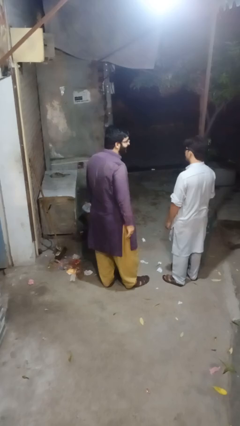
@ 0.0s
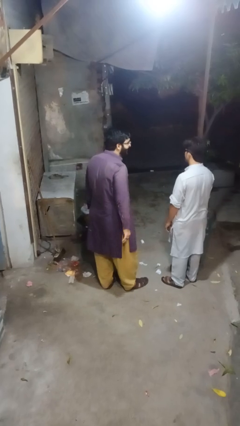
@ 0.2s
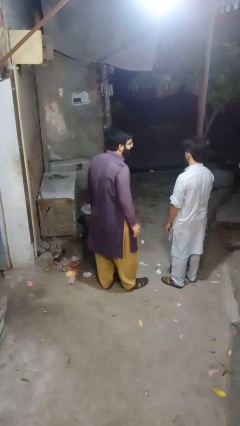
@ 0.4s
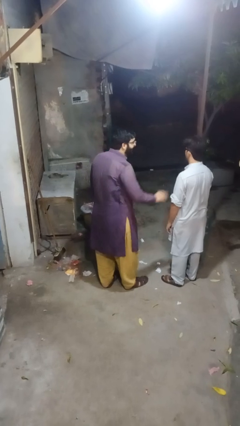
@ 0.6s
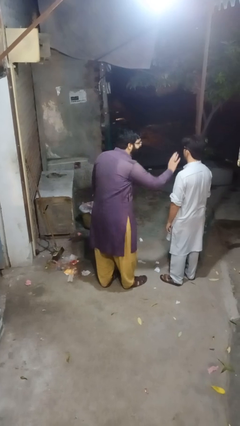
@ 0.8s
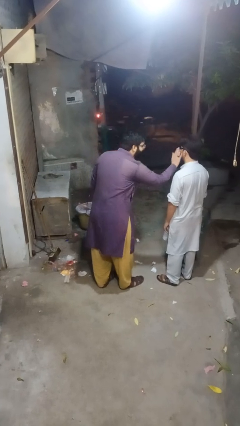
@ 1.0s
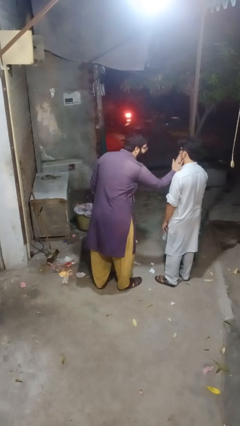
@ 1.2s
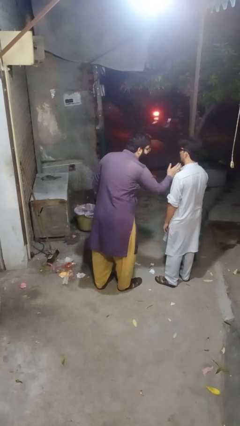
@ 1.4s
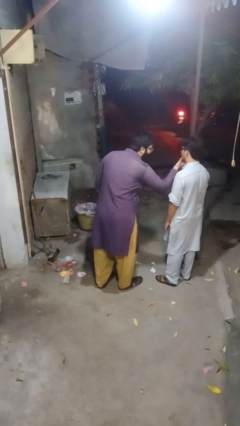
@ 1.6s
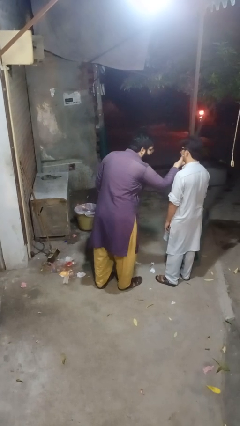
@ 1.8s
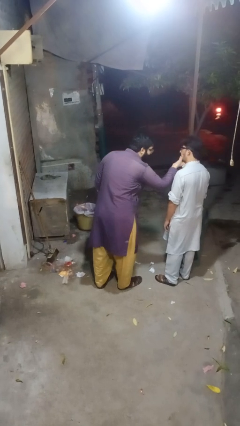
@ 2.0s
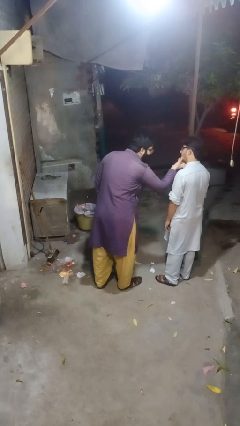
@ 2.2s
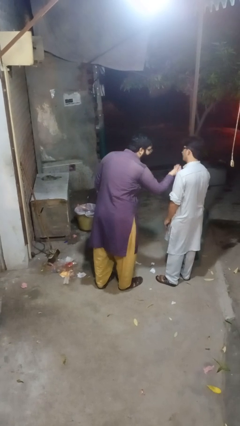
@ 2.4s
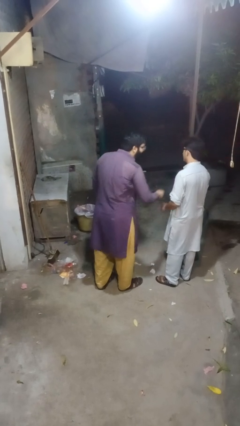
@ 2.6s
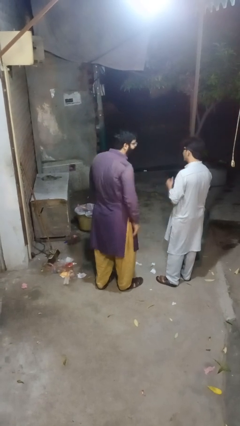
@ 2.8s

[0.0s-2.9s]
person touches face of person

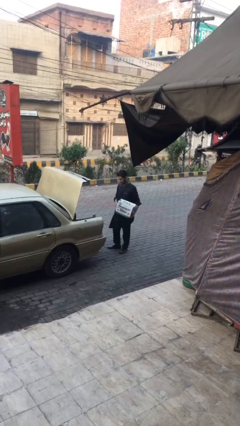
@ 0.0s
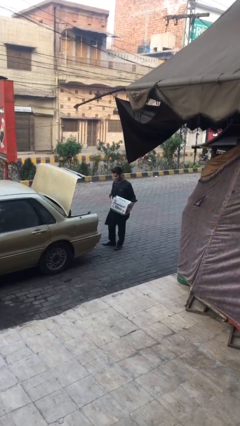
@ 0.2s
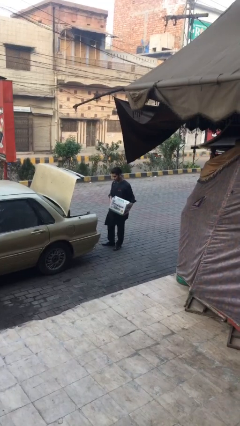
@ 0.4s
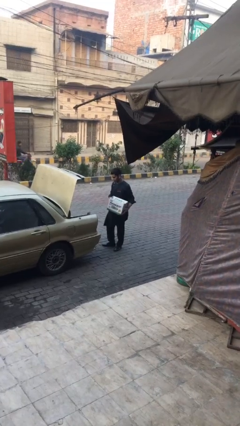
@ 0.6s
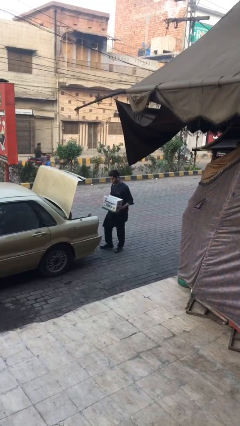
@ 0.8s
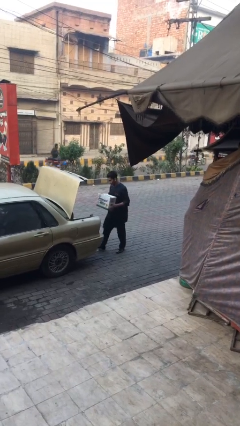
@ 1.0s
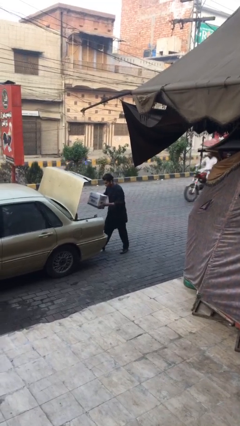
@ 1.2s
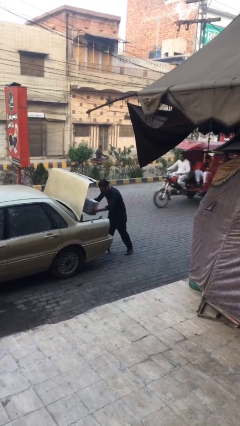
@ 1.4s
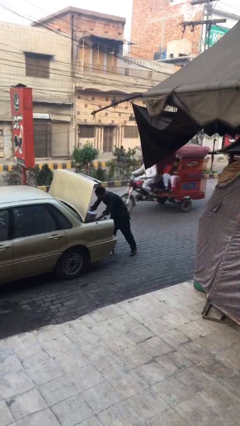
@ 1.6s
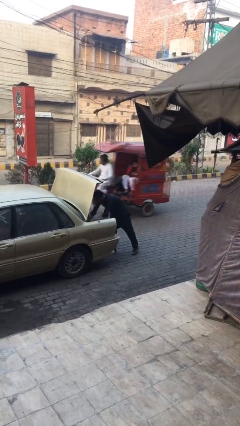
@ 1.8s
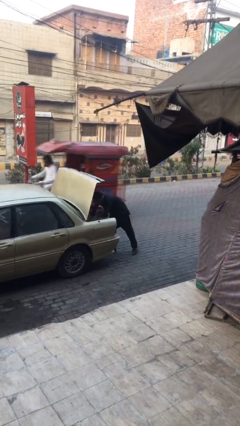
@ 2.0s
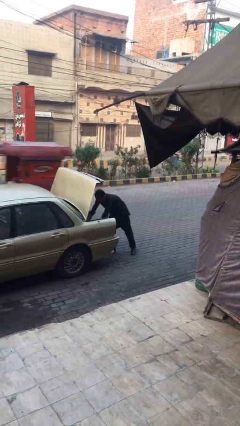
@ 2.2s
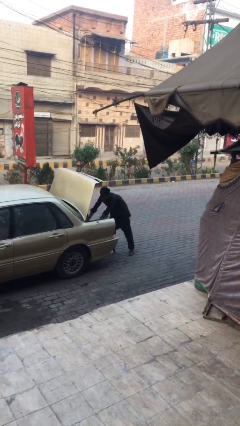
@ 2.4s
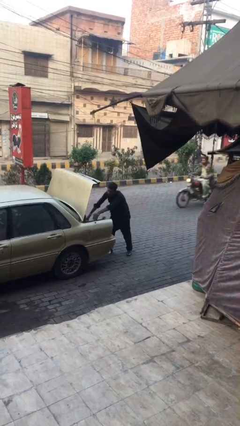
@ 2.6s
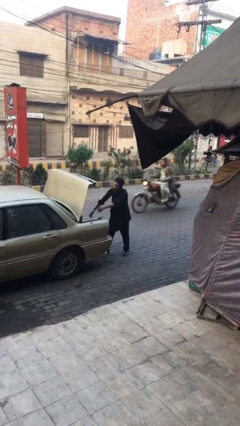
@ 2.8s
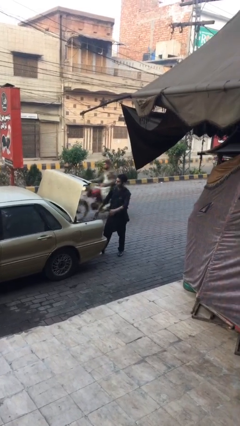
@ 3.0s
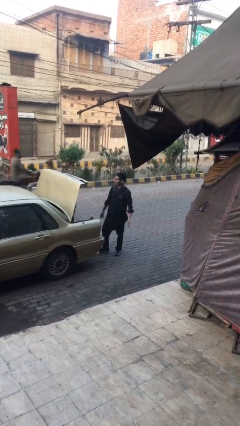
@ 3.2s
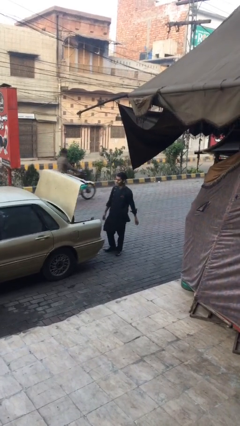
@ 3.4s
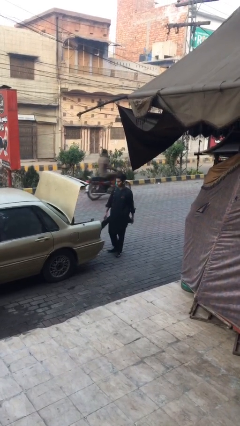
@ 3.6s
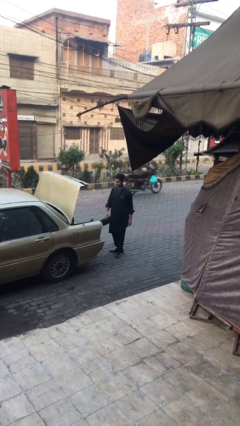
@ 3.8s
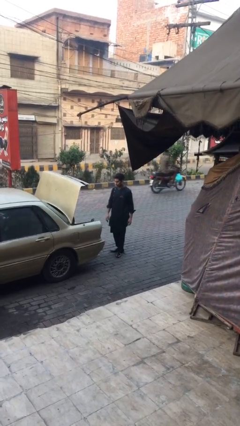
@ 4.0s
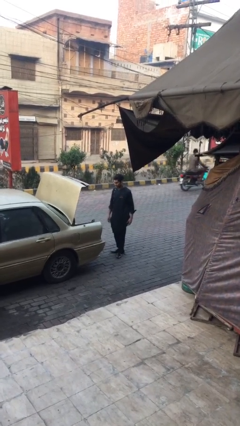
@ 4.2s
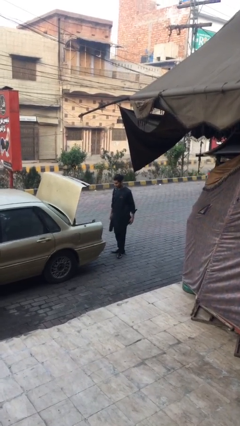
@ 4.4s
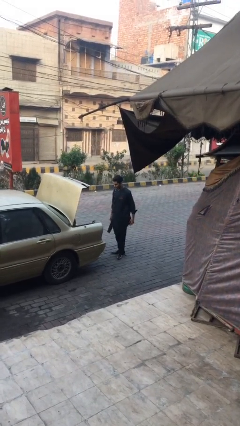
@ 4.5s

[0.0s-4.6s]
person loads car

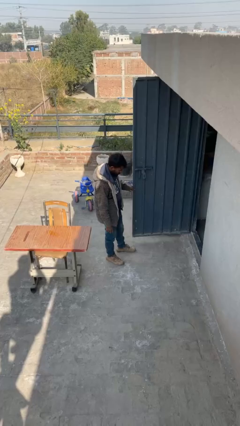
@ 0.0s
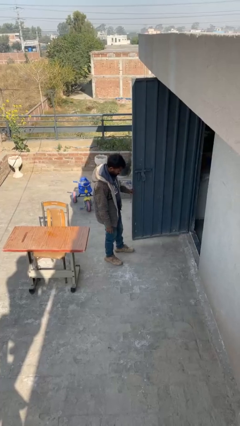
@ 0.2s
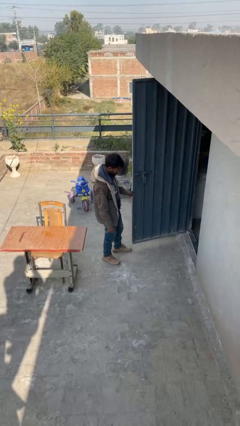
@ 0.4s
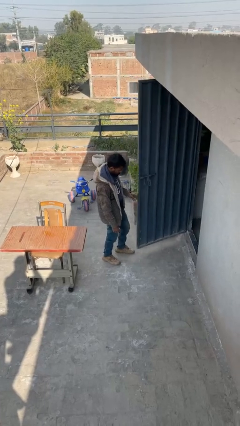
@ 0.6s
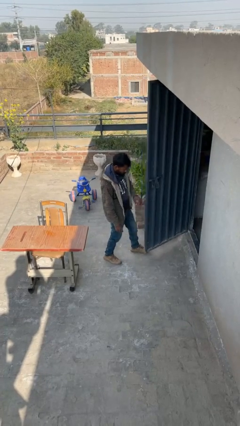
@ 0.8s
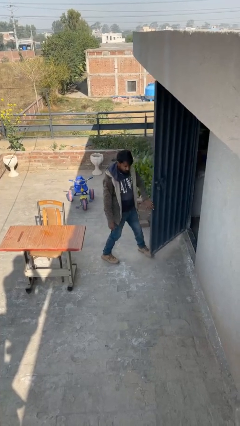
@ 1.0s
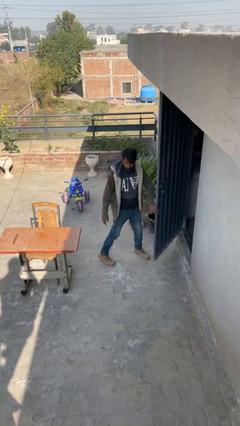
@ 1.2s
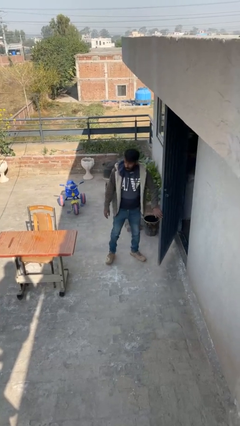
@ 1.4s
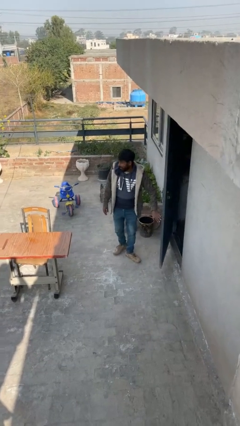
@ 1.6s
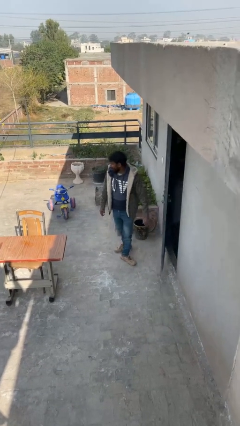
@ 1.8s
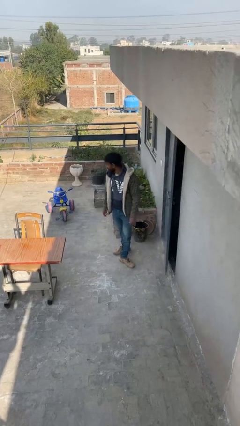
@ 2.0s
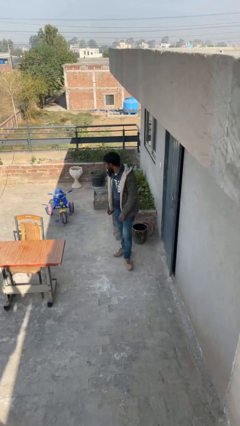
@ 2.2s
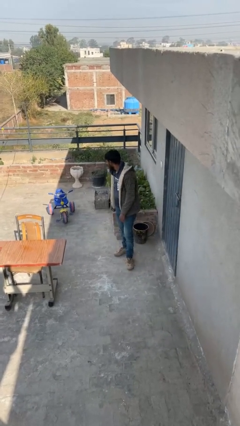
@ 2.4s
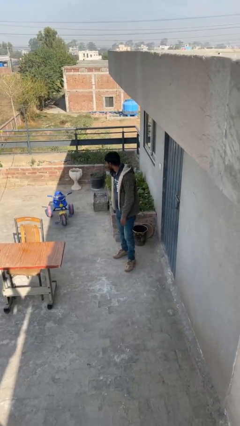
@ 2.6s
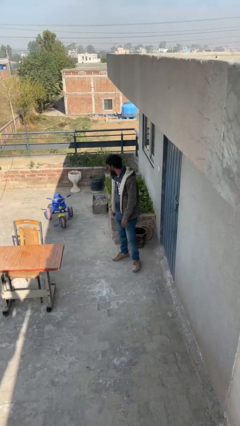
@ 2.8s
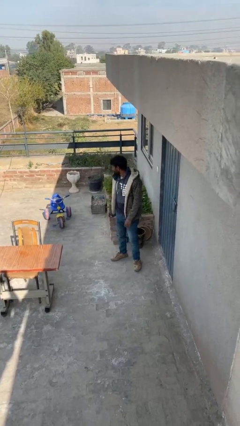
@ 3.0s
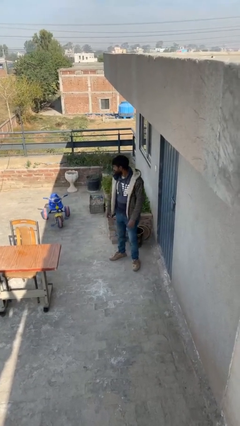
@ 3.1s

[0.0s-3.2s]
person closes facility door

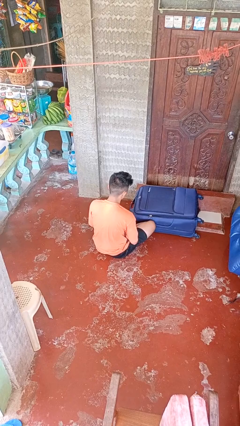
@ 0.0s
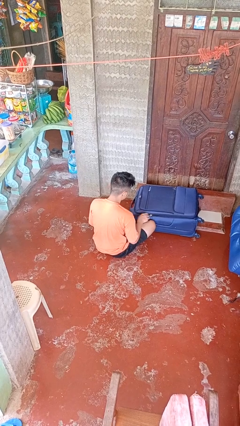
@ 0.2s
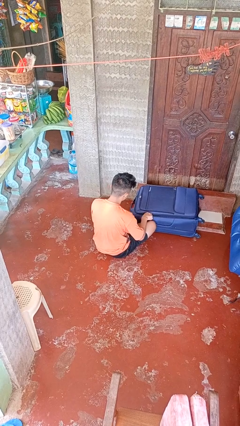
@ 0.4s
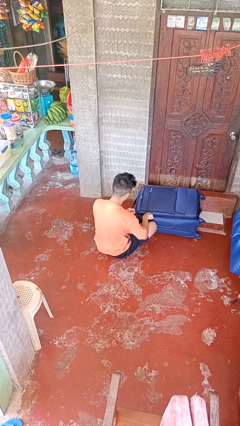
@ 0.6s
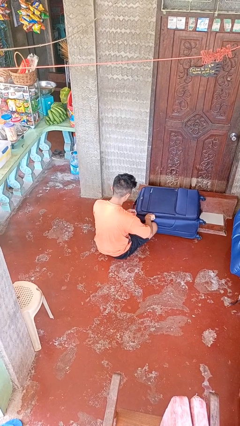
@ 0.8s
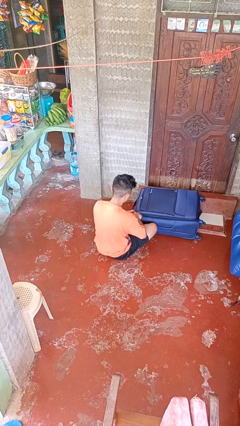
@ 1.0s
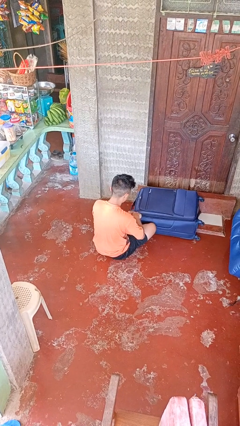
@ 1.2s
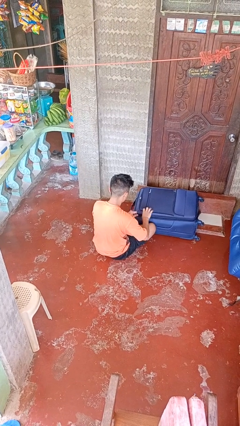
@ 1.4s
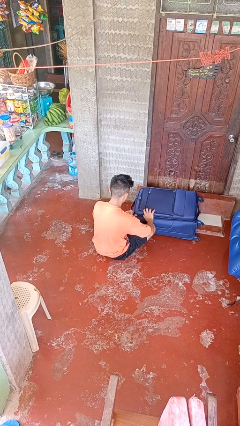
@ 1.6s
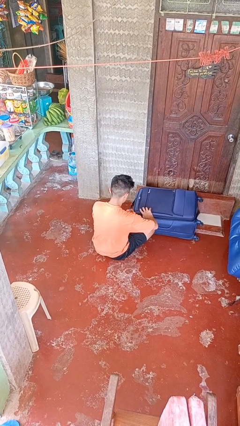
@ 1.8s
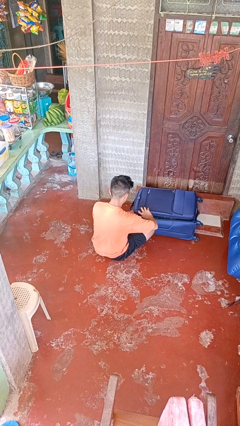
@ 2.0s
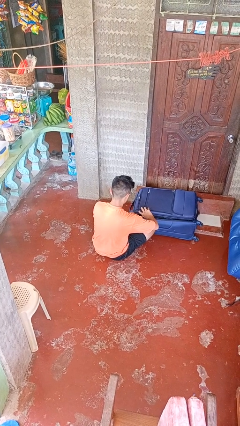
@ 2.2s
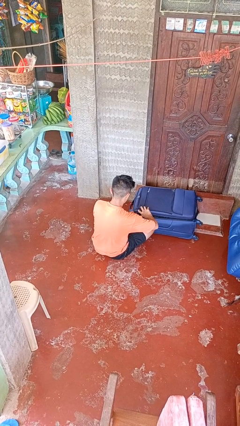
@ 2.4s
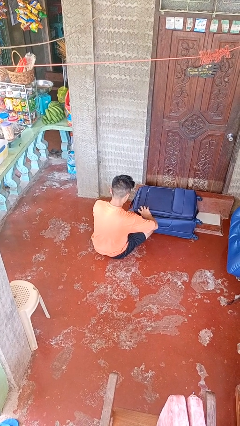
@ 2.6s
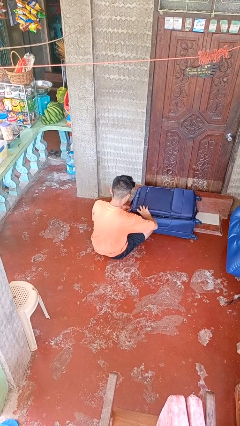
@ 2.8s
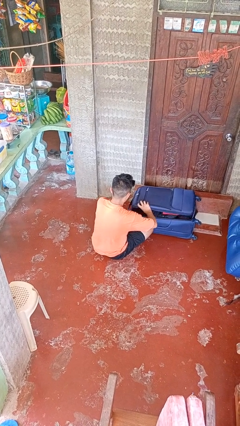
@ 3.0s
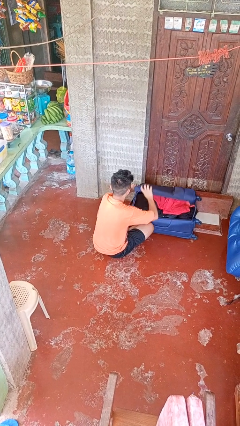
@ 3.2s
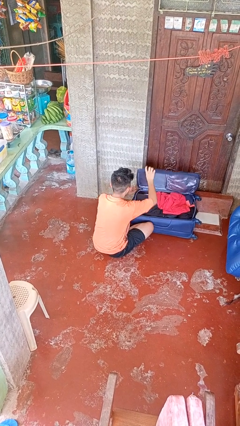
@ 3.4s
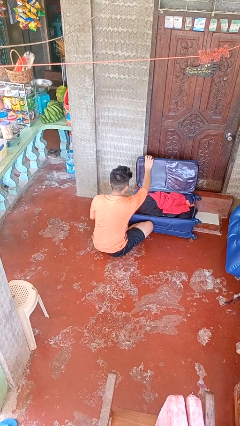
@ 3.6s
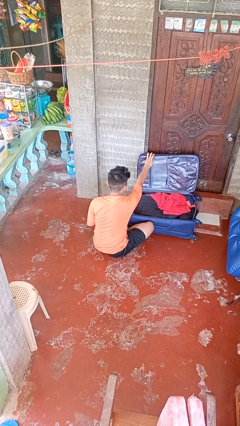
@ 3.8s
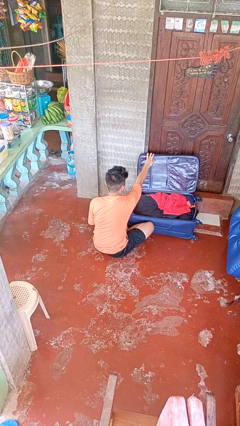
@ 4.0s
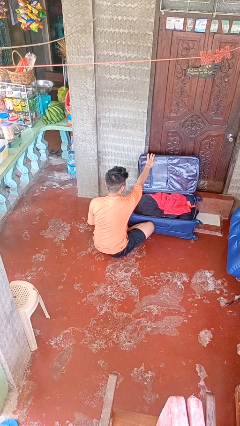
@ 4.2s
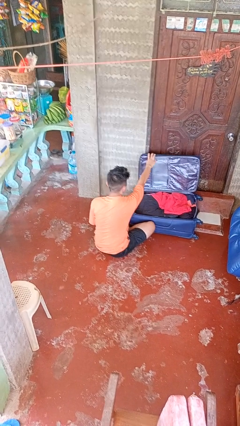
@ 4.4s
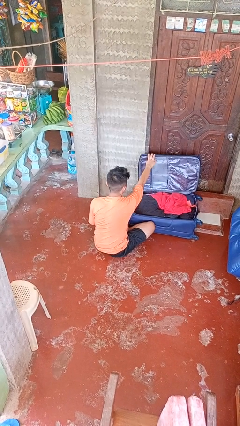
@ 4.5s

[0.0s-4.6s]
person opens suitcase

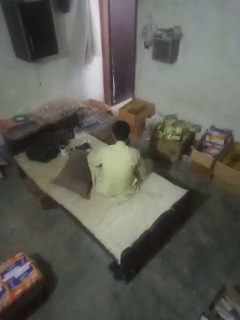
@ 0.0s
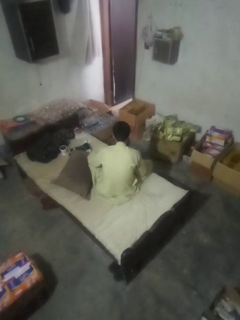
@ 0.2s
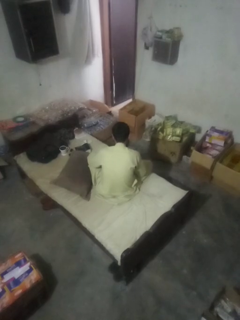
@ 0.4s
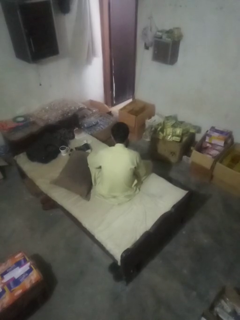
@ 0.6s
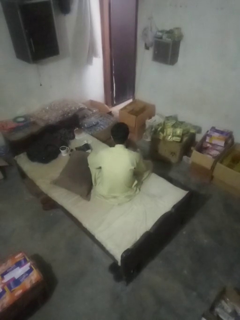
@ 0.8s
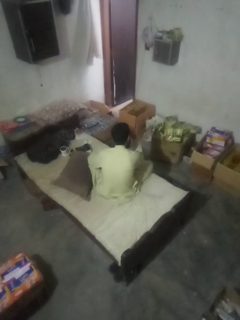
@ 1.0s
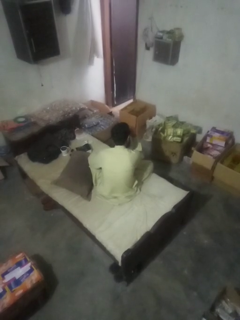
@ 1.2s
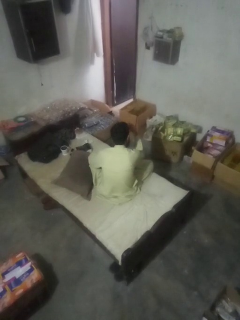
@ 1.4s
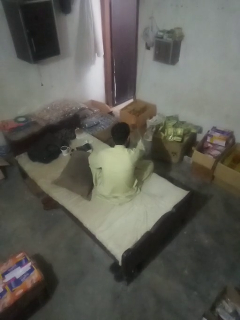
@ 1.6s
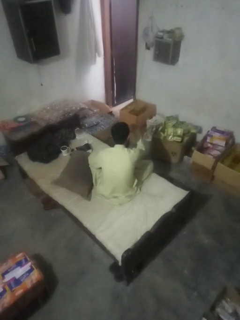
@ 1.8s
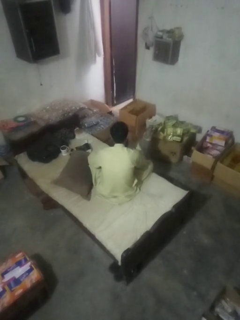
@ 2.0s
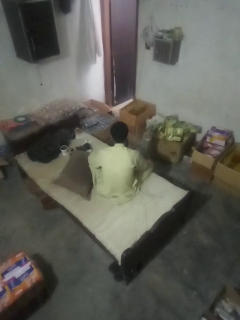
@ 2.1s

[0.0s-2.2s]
person gestures watch closely

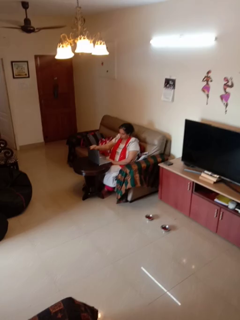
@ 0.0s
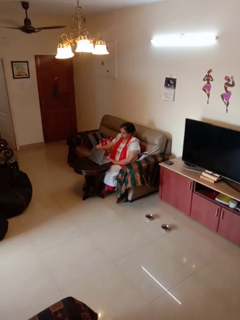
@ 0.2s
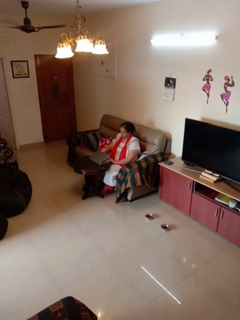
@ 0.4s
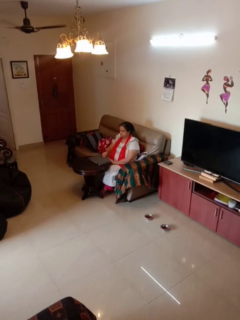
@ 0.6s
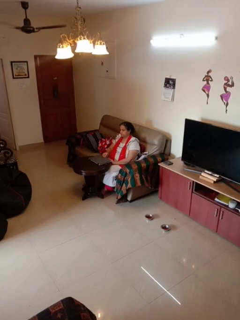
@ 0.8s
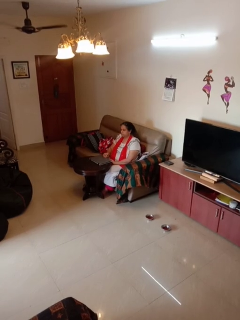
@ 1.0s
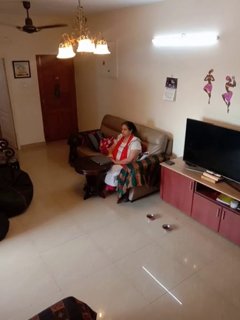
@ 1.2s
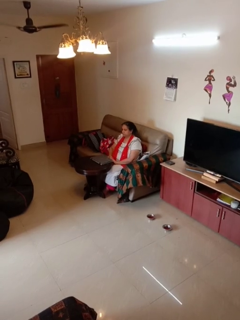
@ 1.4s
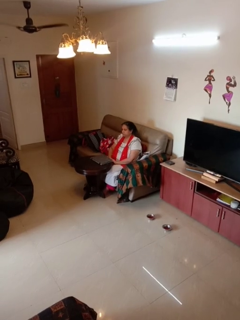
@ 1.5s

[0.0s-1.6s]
person closes laptop
